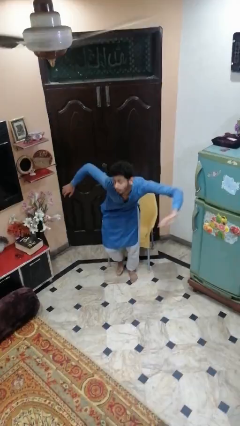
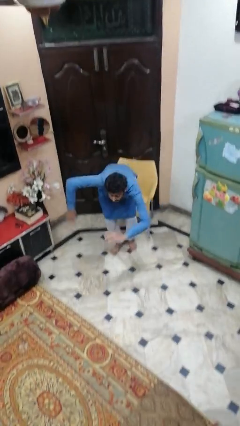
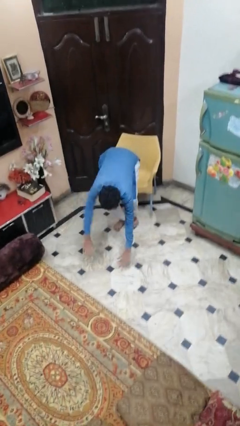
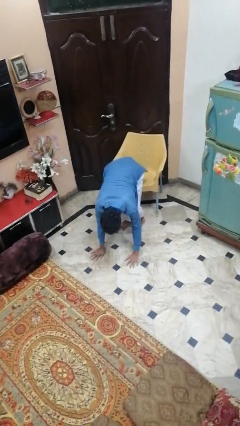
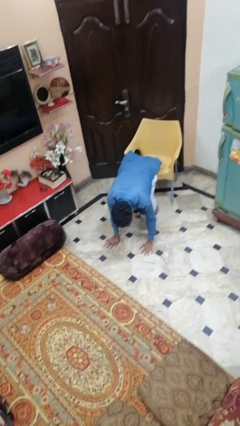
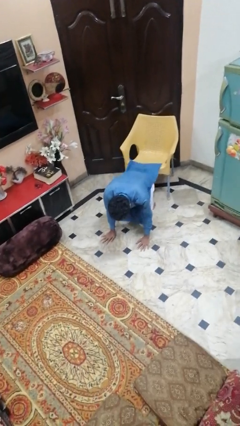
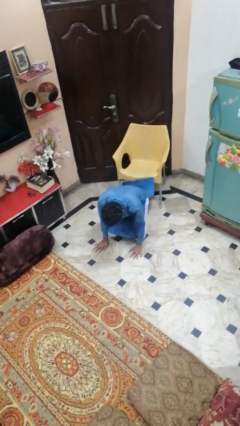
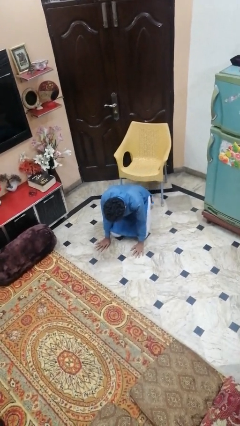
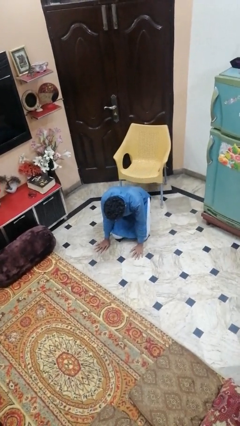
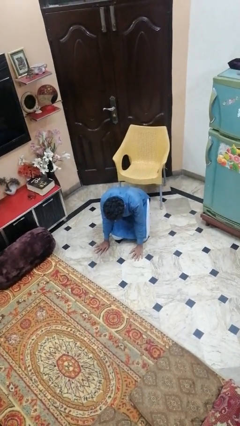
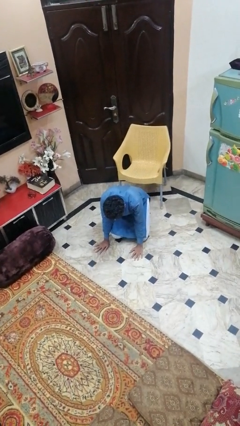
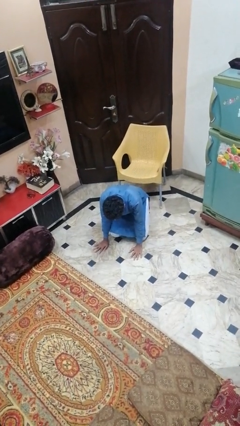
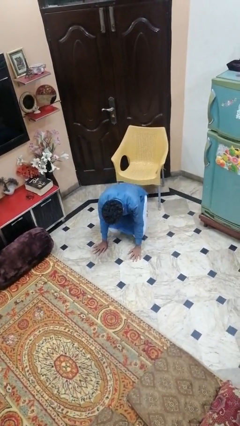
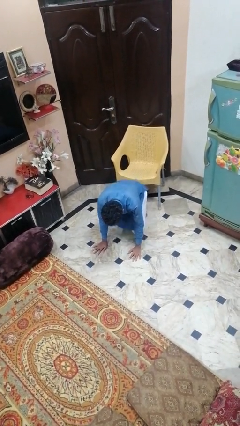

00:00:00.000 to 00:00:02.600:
person falls from chair

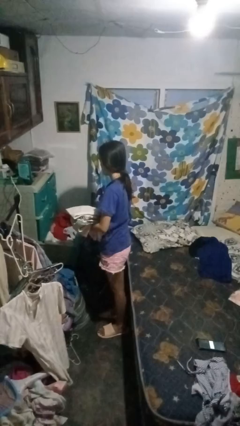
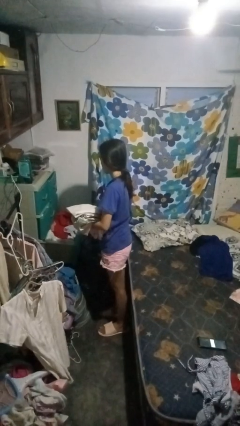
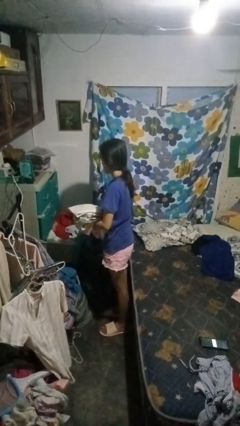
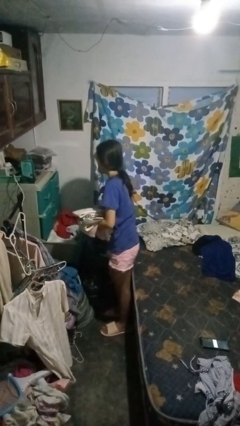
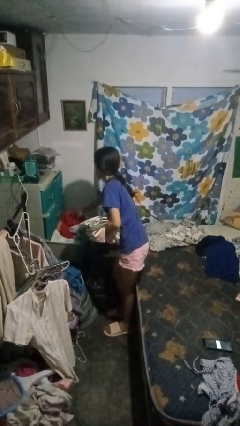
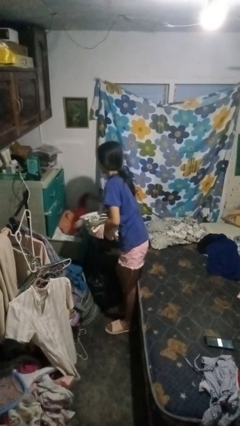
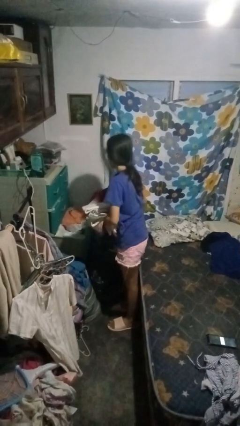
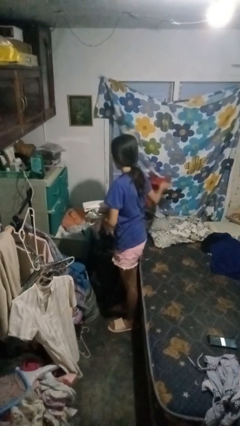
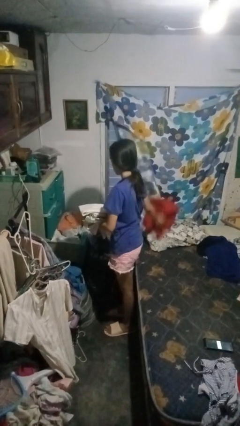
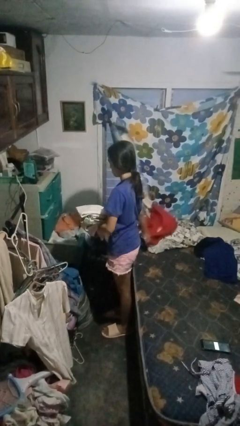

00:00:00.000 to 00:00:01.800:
person takes clothes from dresser

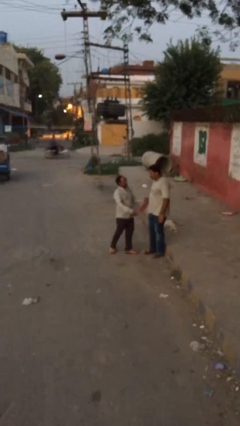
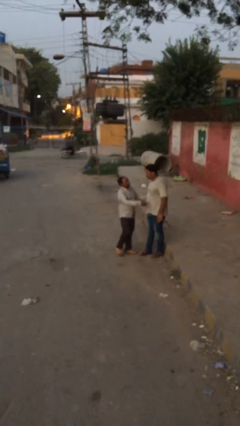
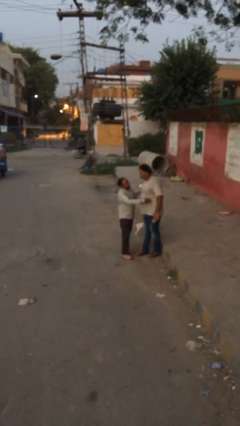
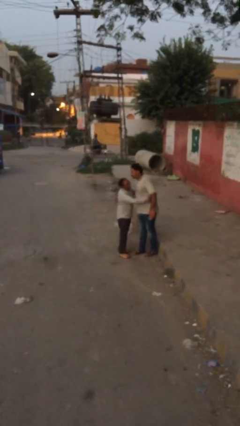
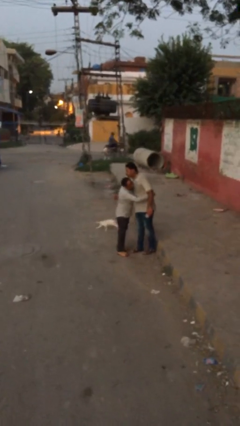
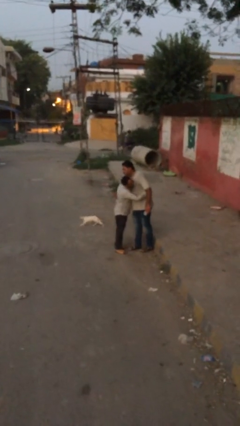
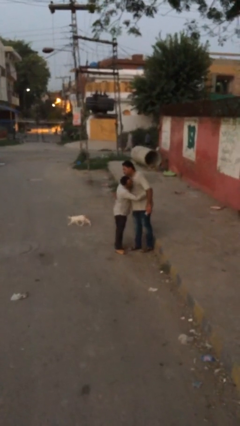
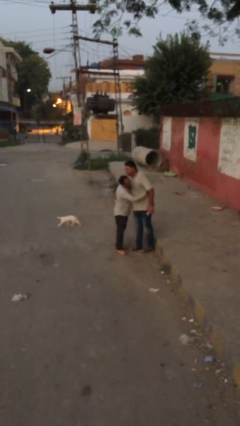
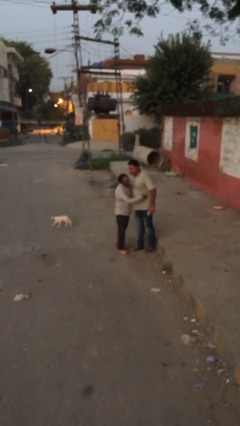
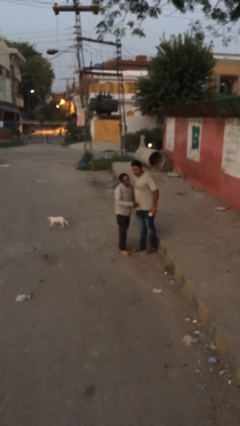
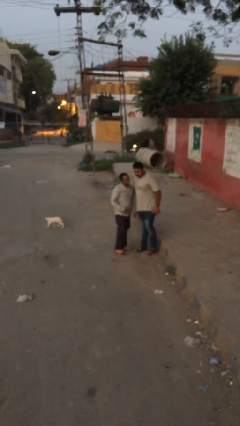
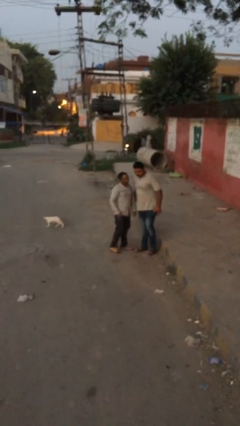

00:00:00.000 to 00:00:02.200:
person embraces person

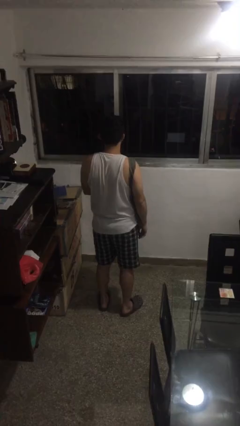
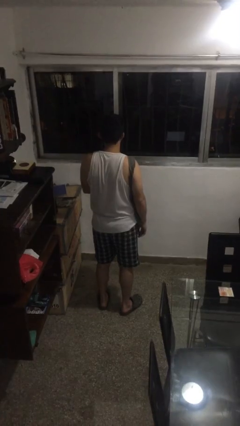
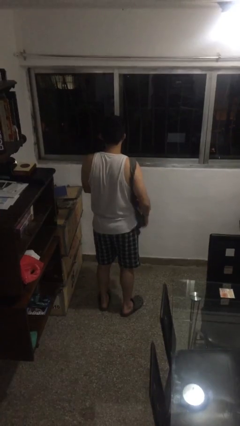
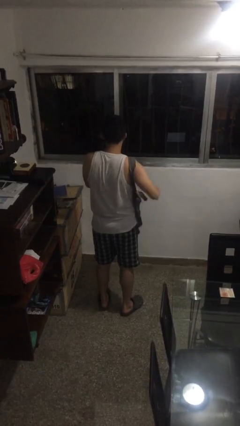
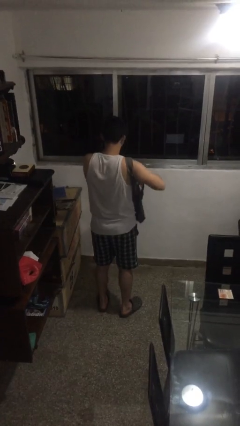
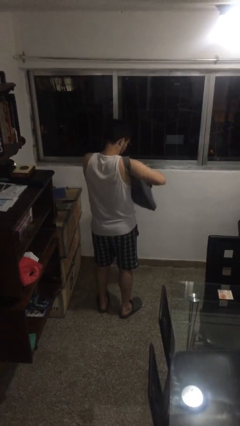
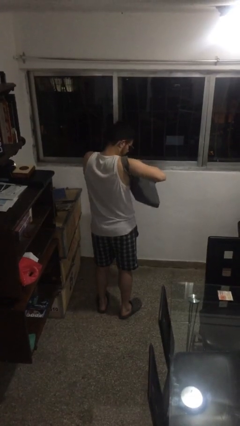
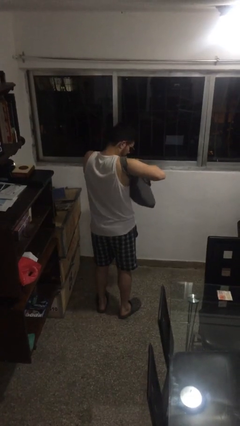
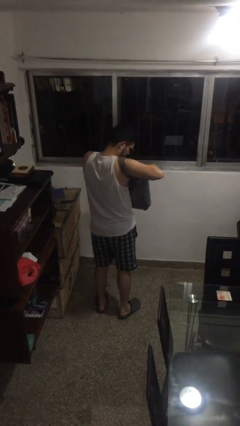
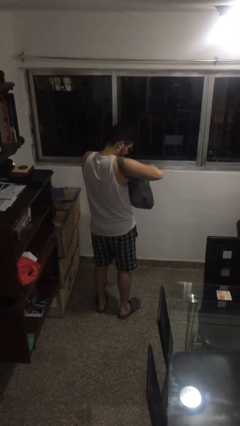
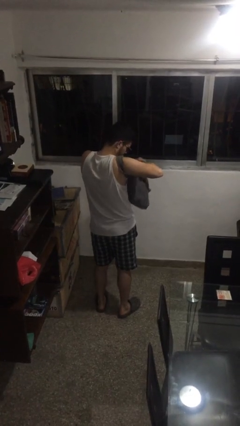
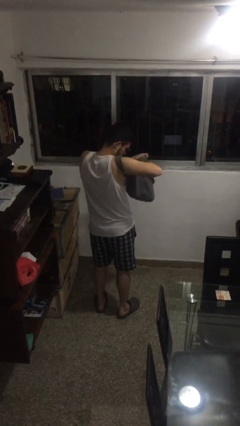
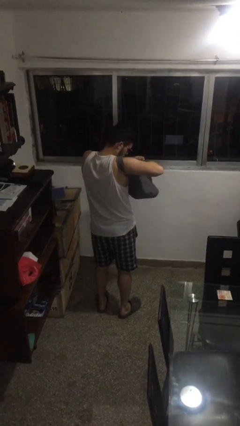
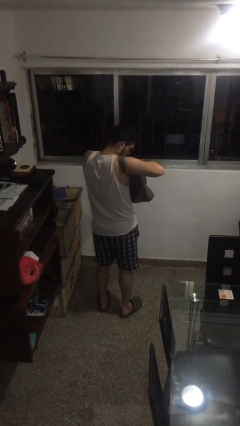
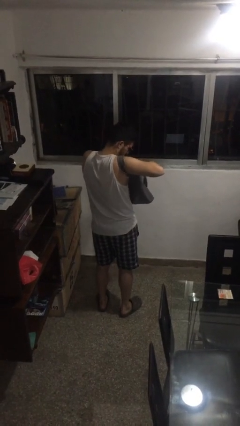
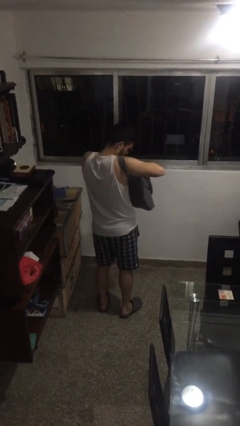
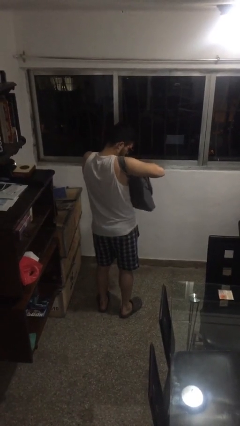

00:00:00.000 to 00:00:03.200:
person searches in purse

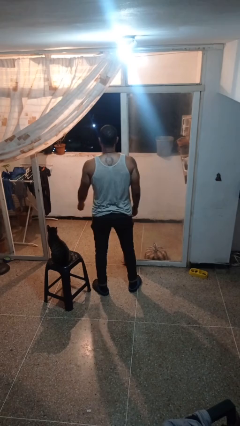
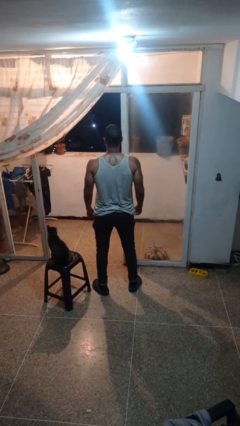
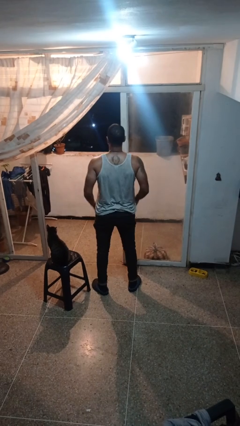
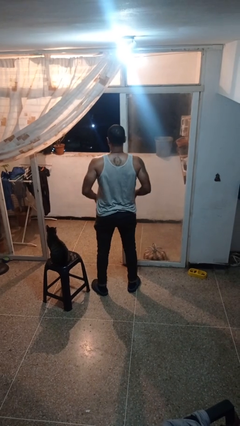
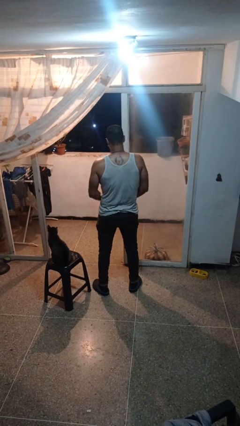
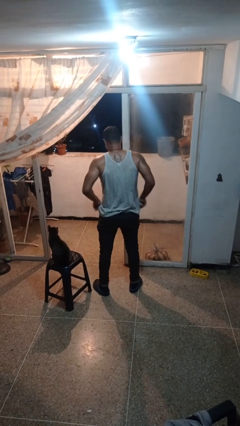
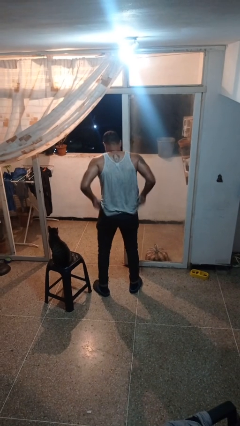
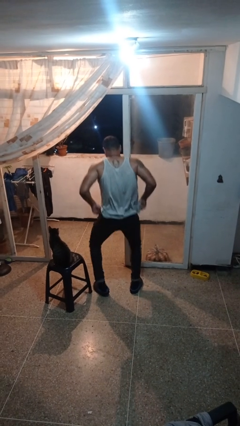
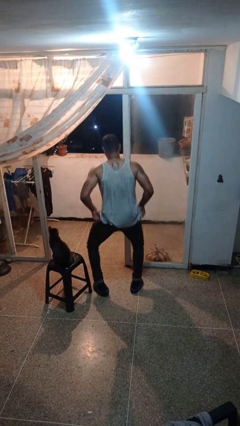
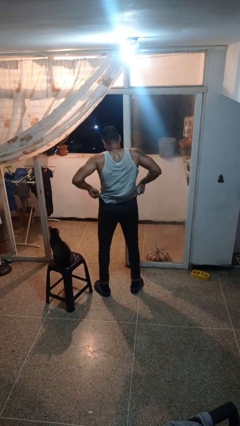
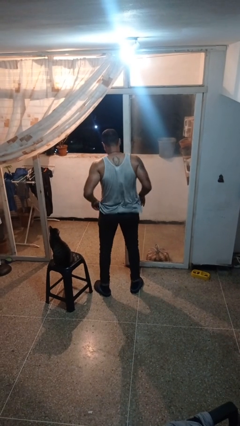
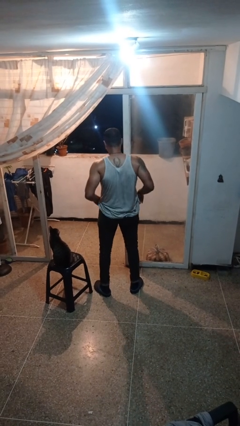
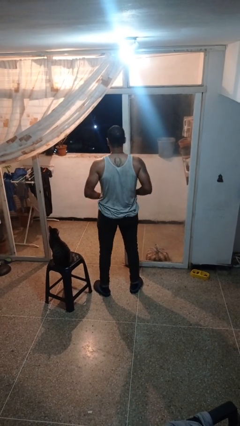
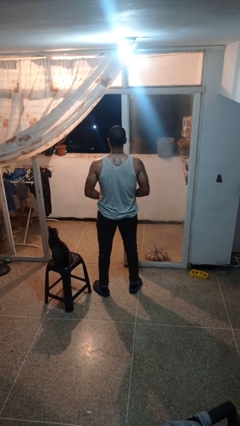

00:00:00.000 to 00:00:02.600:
person hikes up pants

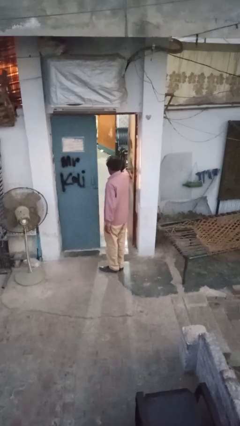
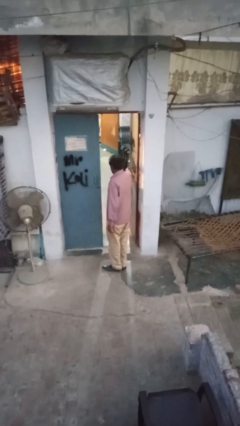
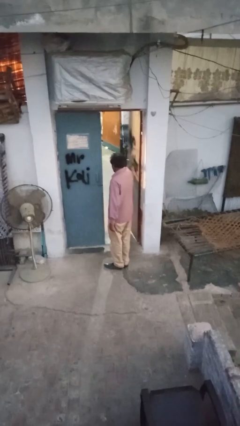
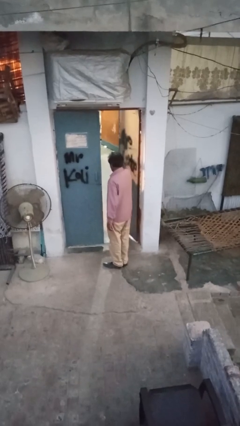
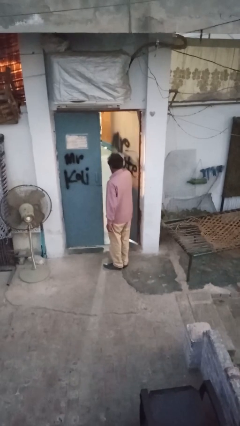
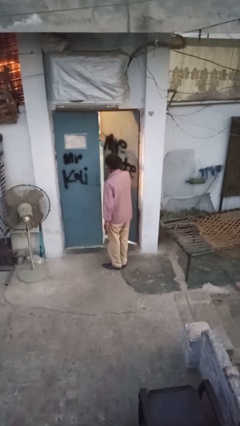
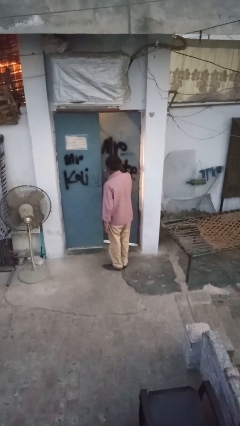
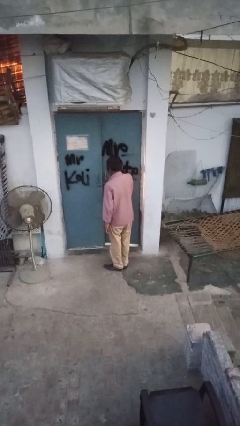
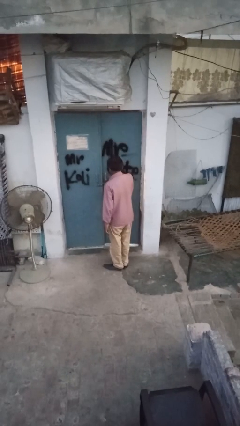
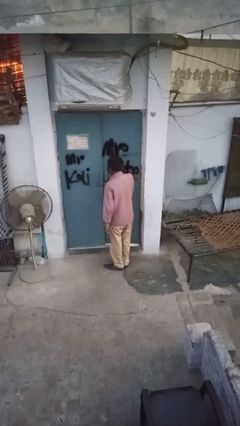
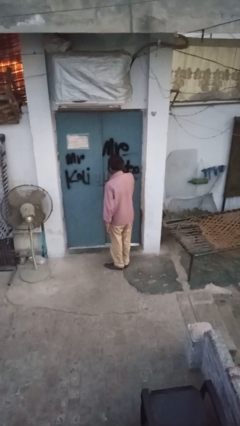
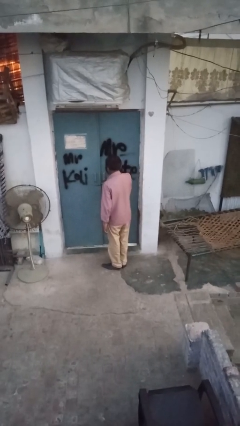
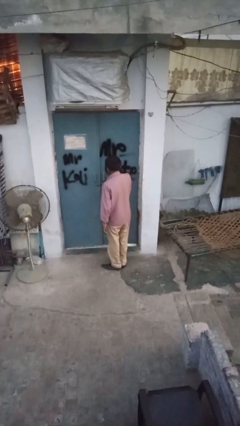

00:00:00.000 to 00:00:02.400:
person closes facility door

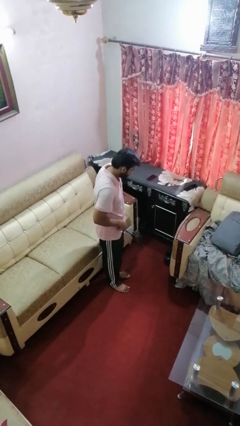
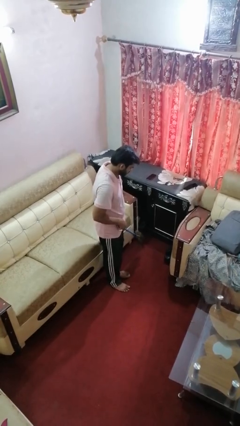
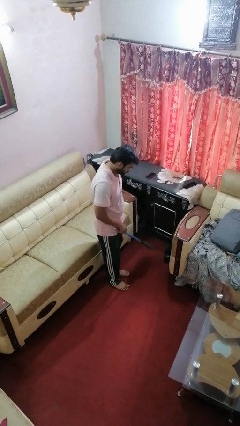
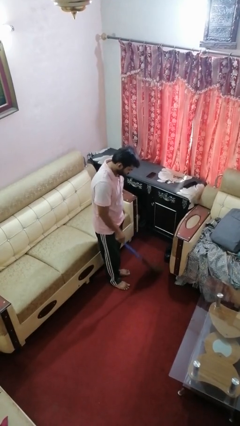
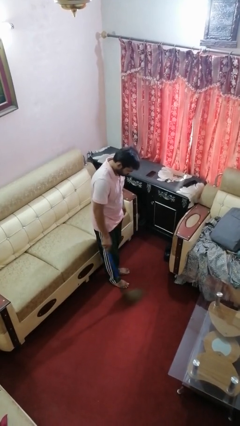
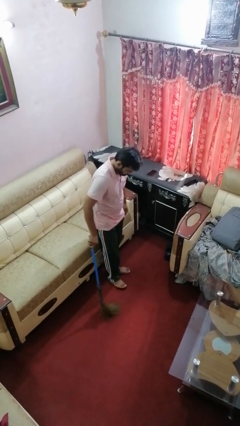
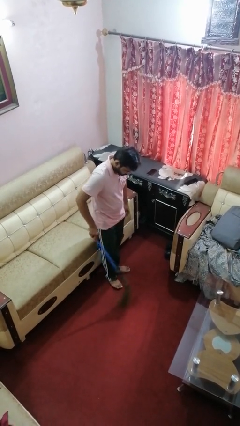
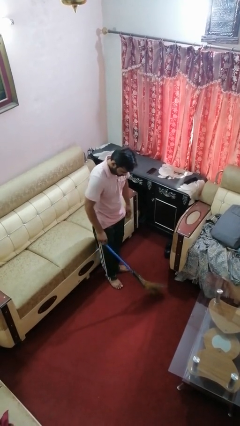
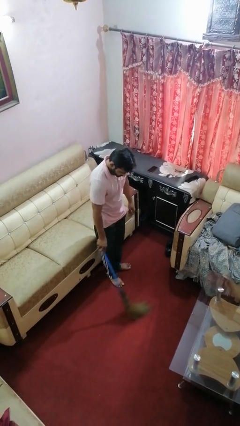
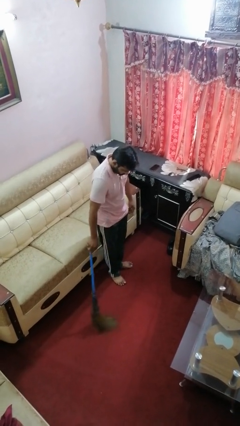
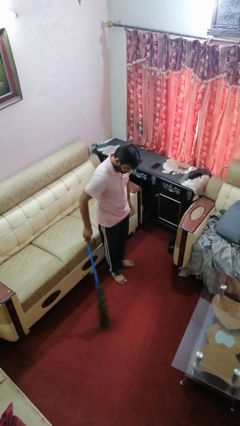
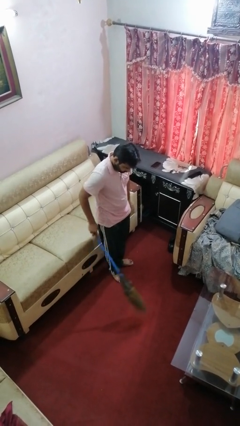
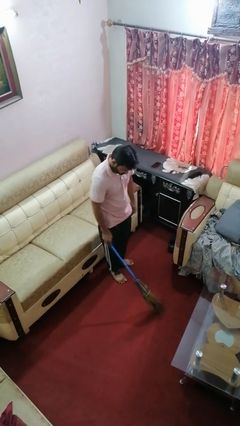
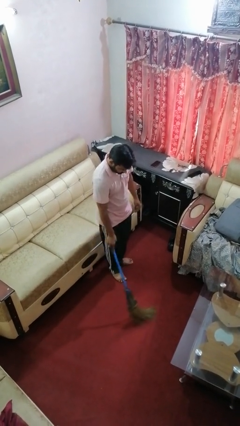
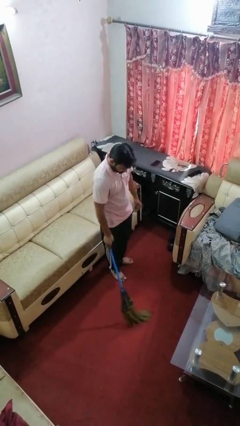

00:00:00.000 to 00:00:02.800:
person sweeps floor
